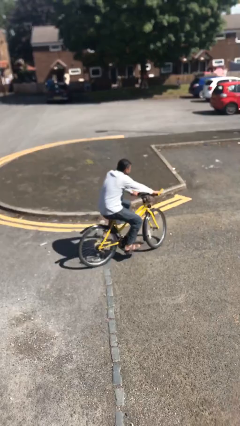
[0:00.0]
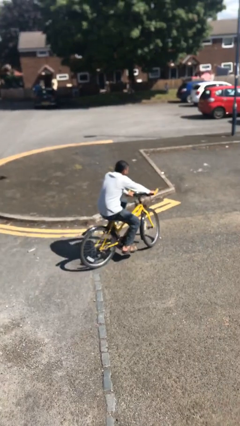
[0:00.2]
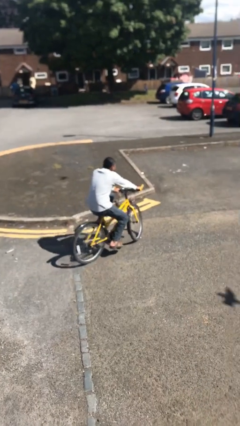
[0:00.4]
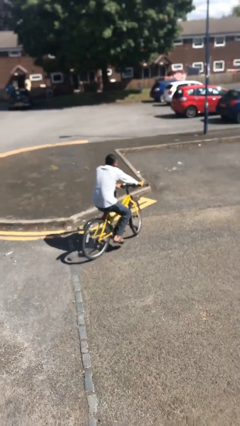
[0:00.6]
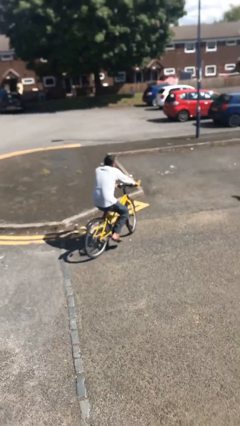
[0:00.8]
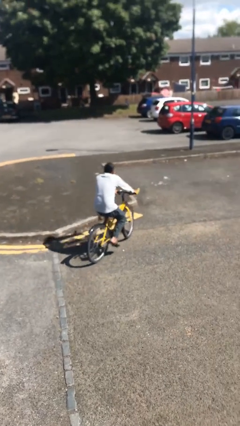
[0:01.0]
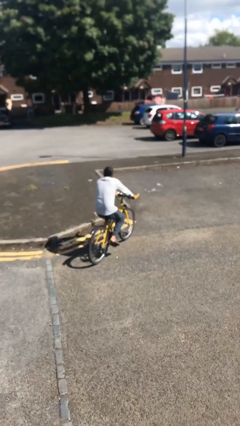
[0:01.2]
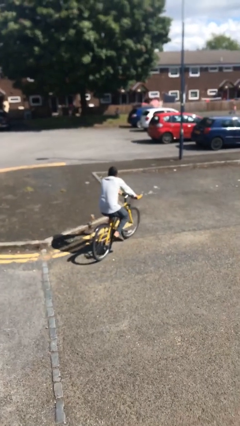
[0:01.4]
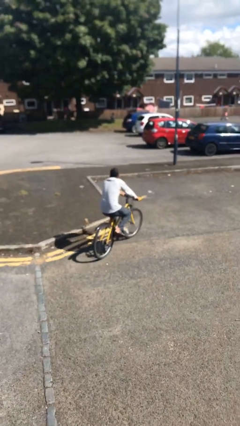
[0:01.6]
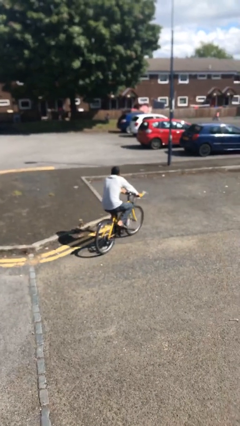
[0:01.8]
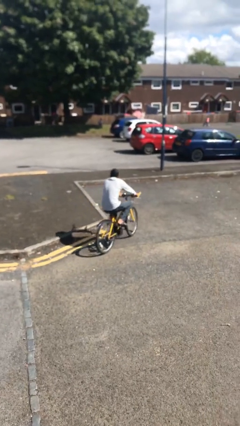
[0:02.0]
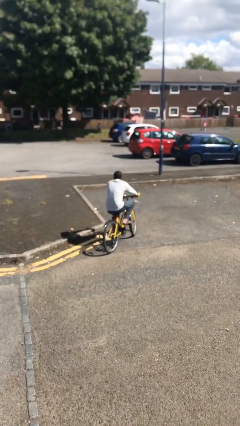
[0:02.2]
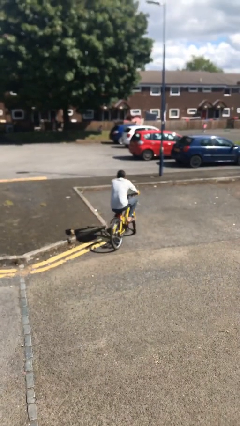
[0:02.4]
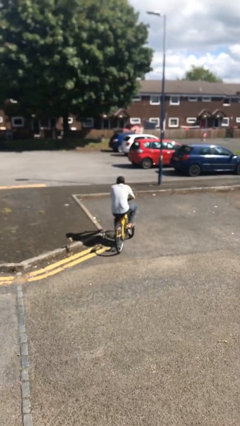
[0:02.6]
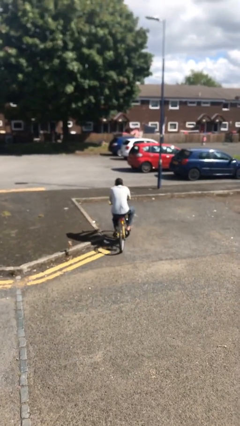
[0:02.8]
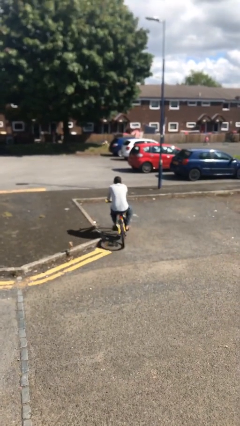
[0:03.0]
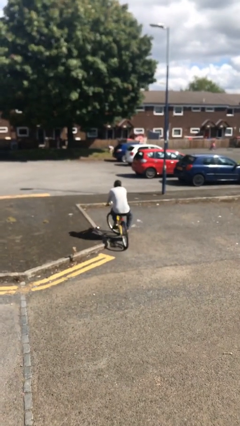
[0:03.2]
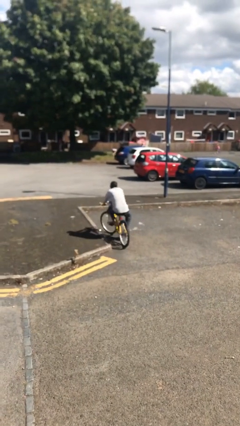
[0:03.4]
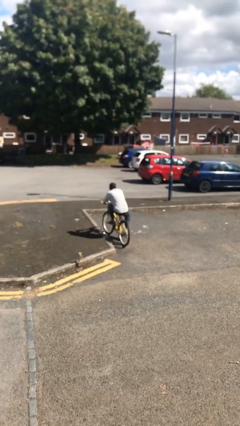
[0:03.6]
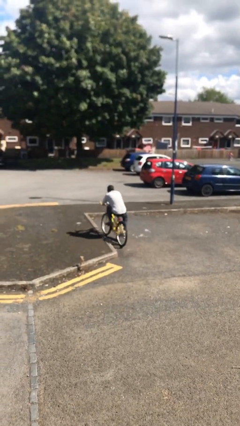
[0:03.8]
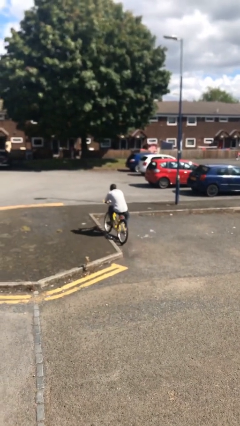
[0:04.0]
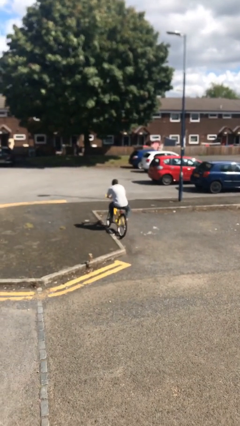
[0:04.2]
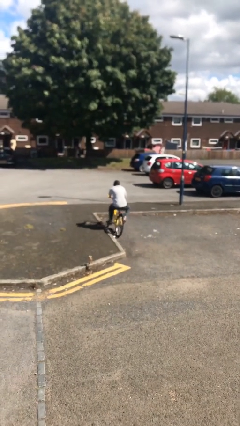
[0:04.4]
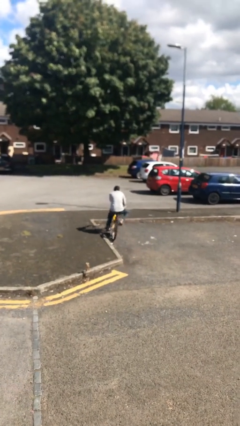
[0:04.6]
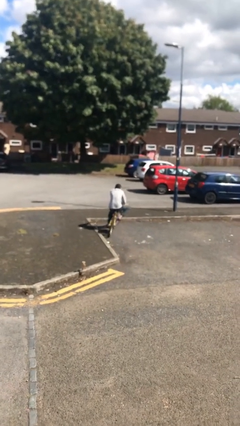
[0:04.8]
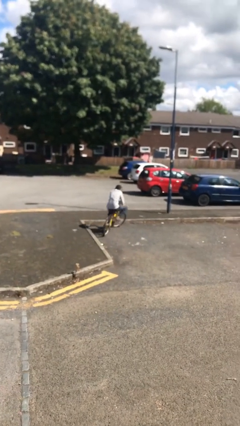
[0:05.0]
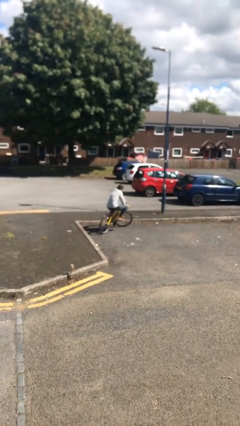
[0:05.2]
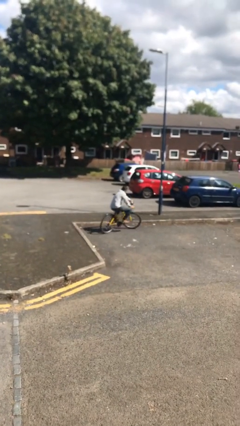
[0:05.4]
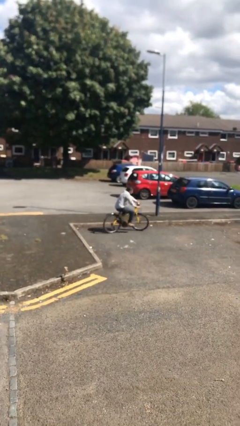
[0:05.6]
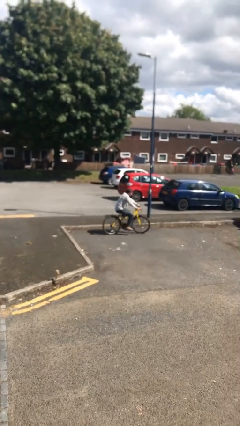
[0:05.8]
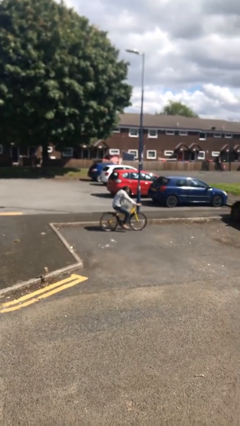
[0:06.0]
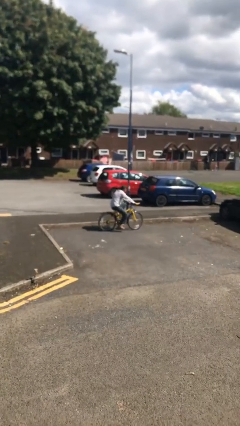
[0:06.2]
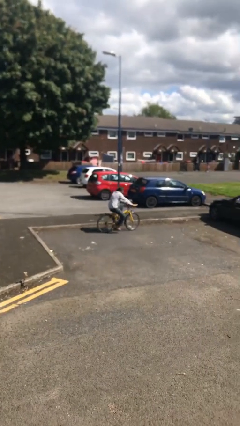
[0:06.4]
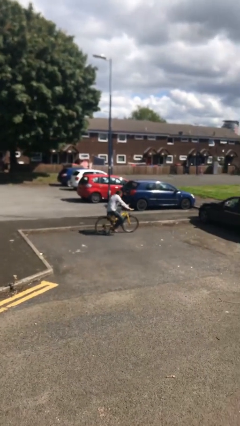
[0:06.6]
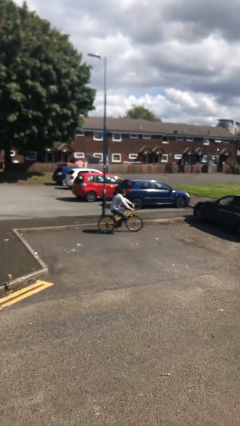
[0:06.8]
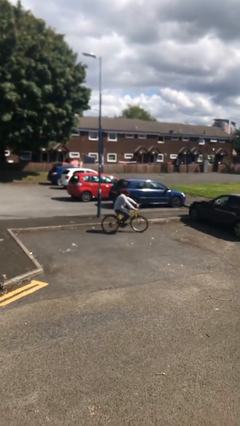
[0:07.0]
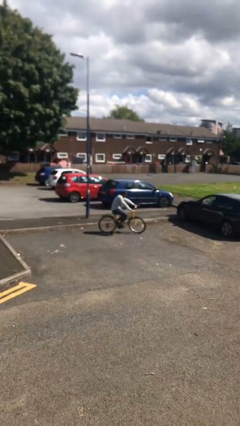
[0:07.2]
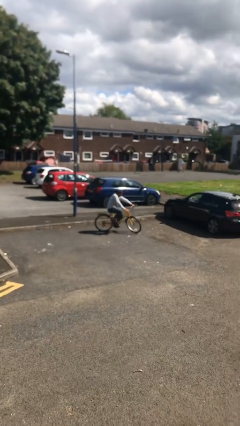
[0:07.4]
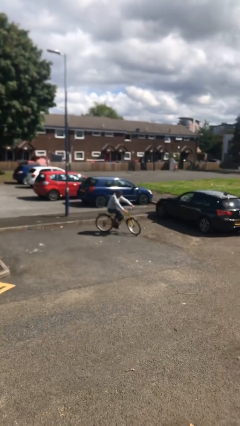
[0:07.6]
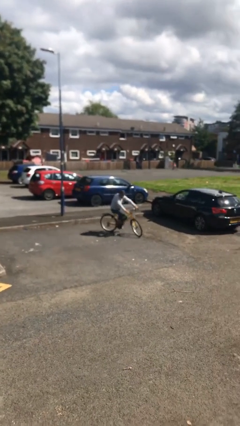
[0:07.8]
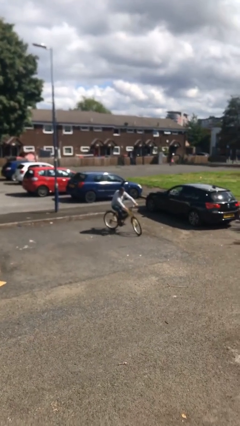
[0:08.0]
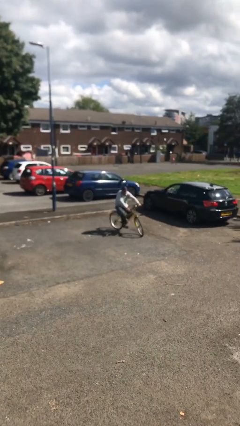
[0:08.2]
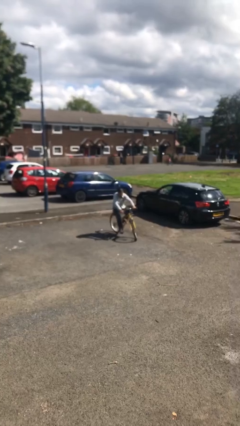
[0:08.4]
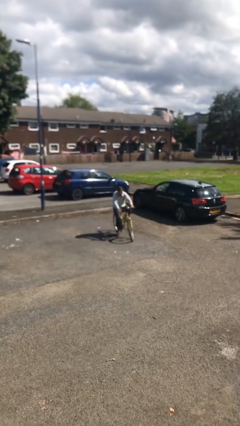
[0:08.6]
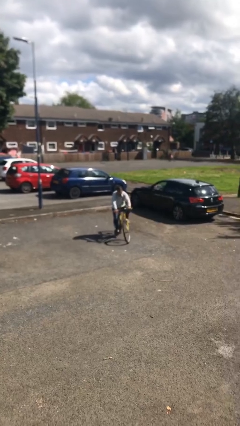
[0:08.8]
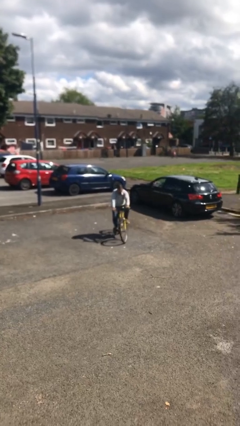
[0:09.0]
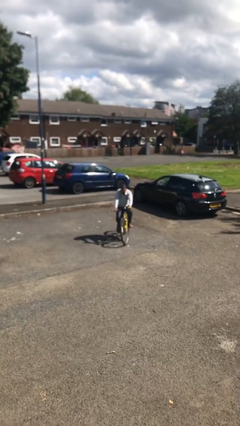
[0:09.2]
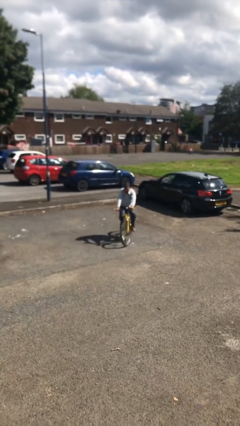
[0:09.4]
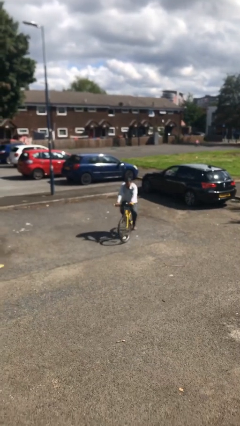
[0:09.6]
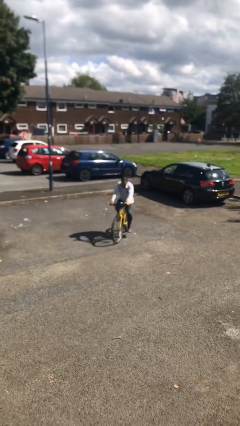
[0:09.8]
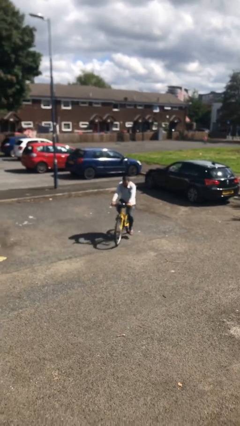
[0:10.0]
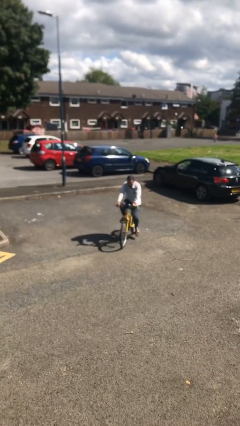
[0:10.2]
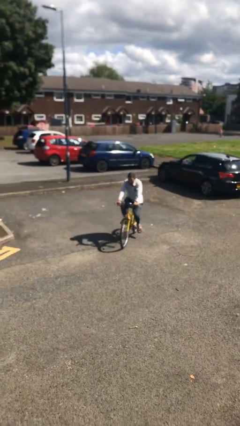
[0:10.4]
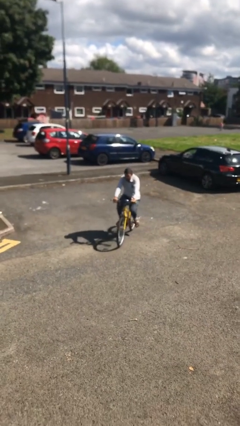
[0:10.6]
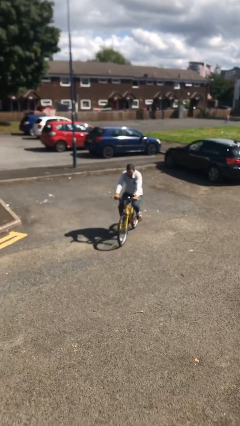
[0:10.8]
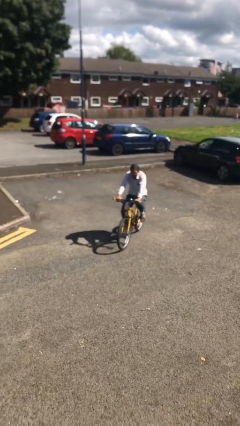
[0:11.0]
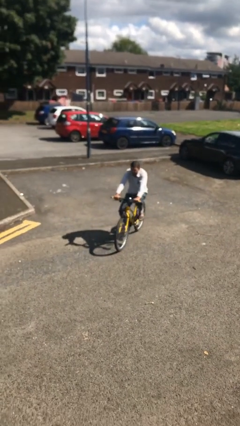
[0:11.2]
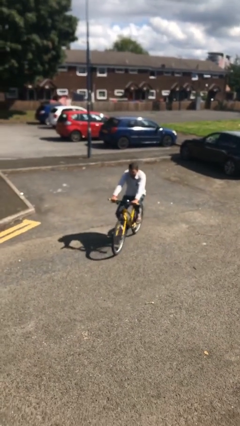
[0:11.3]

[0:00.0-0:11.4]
person rides bicycle

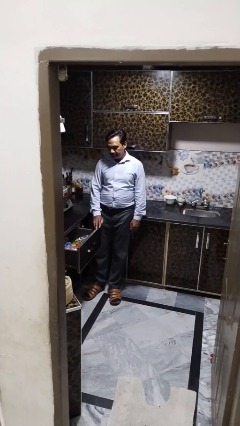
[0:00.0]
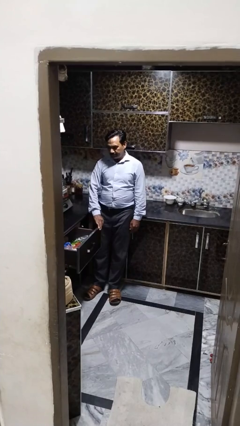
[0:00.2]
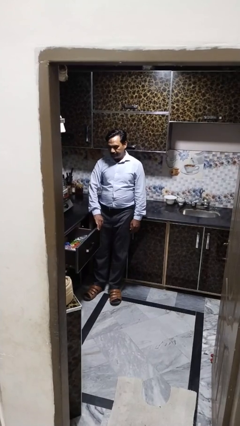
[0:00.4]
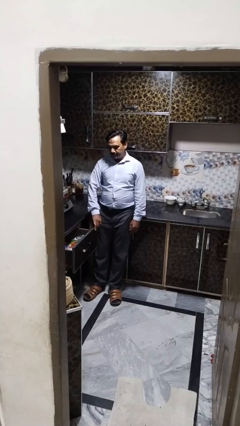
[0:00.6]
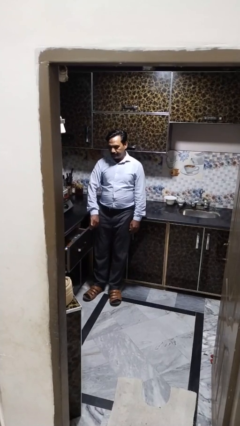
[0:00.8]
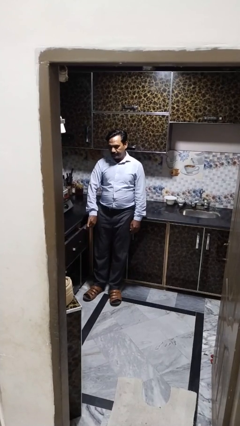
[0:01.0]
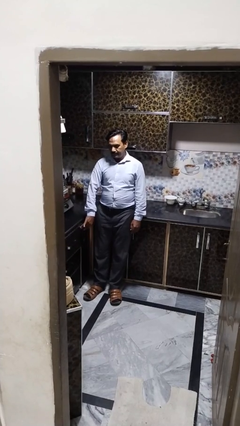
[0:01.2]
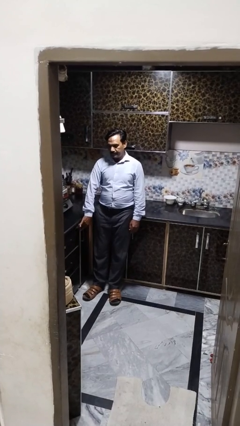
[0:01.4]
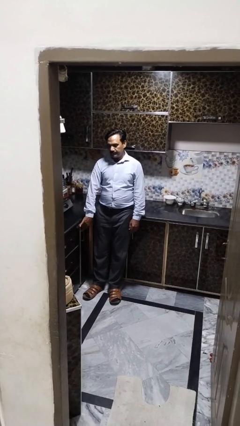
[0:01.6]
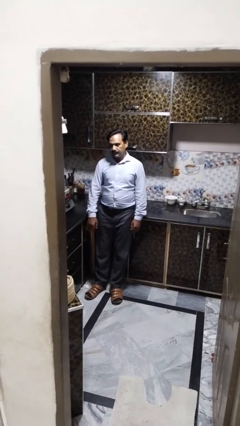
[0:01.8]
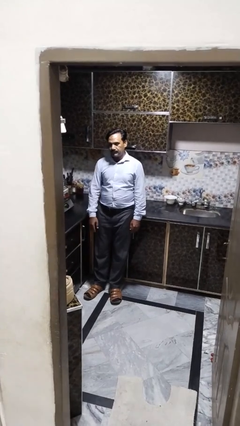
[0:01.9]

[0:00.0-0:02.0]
person closes kitchen drawer

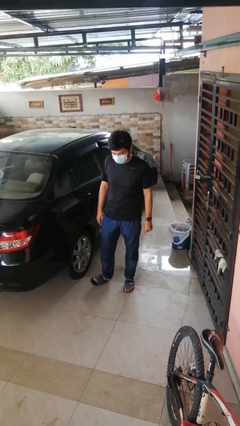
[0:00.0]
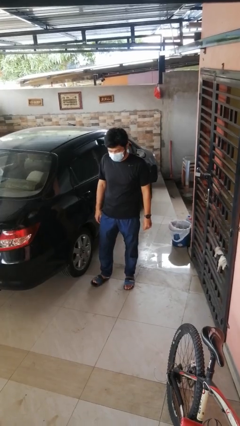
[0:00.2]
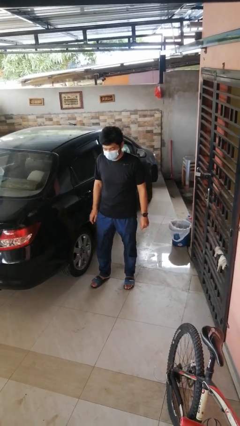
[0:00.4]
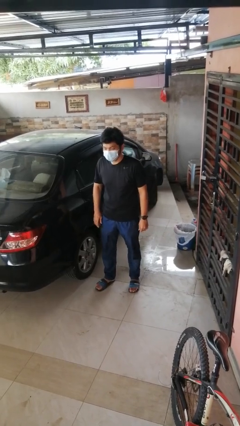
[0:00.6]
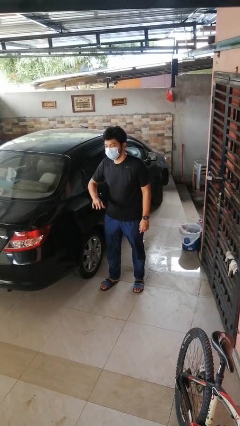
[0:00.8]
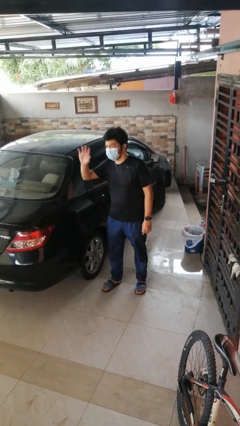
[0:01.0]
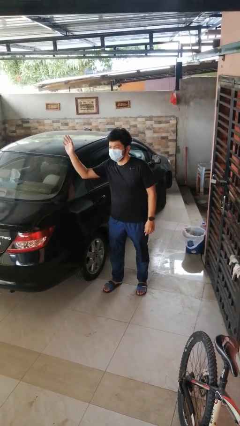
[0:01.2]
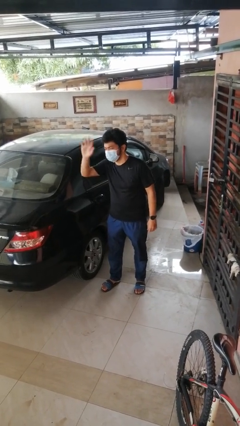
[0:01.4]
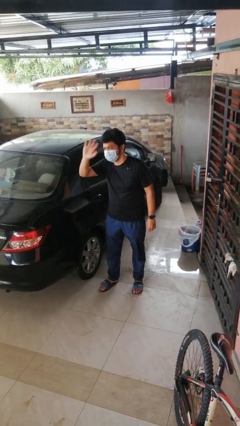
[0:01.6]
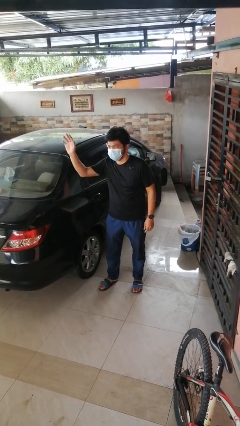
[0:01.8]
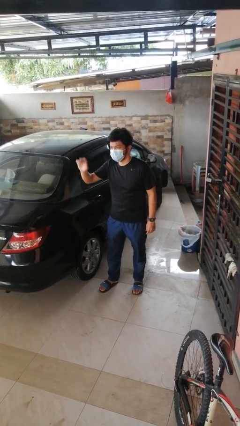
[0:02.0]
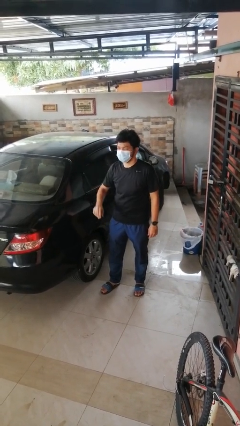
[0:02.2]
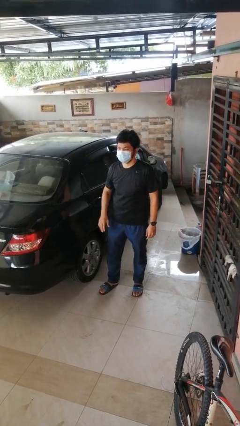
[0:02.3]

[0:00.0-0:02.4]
person waves at person

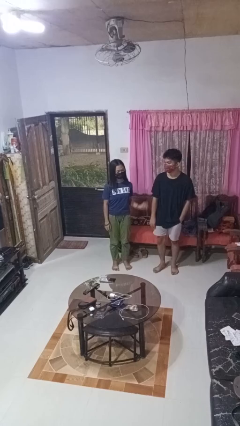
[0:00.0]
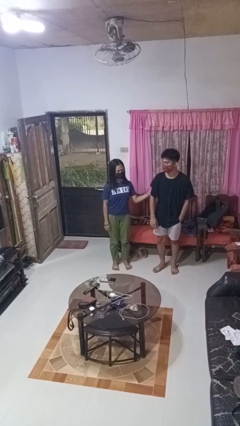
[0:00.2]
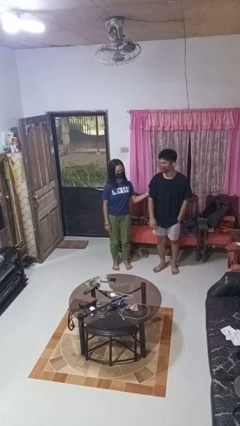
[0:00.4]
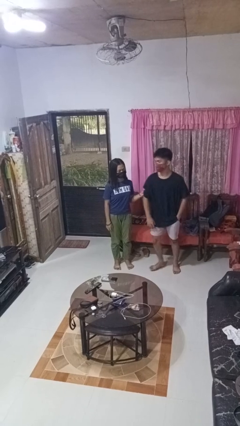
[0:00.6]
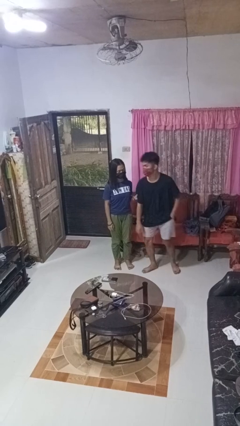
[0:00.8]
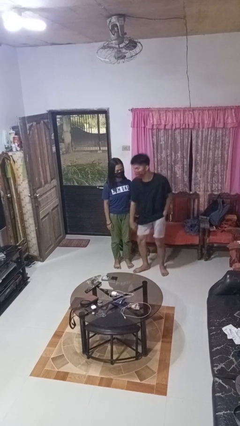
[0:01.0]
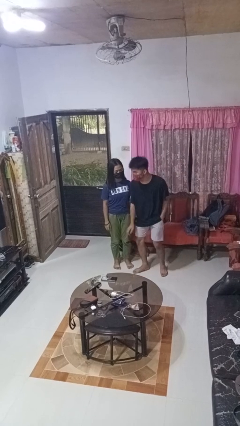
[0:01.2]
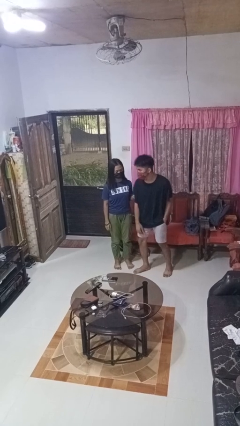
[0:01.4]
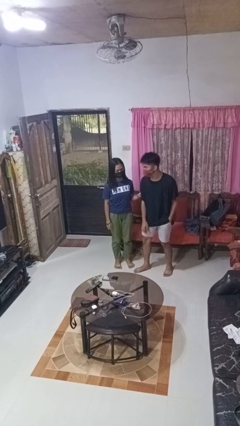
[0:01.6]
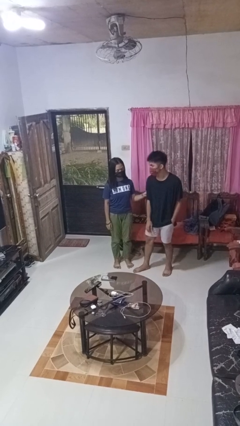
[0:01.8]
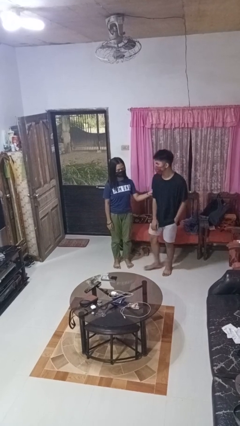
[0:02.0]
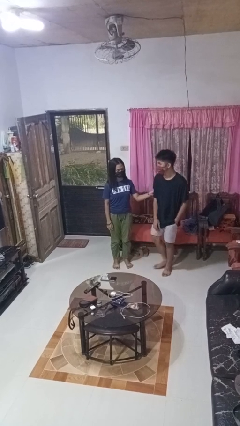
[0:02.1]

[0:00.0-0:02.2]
person grabs person by bicep
